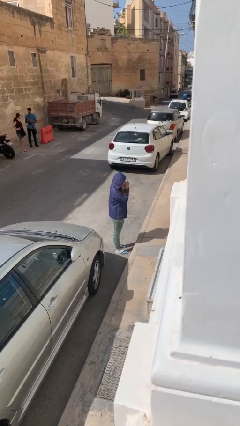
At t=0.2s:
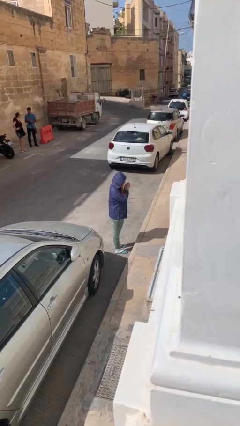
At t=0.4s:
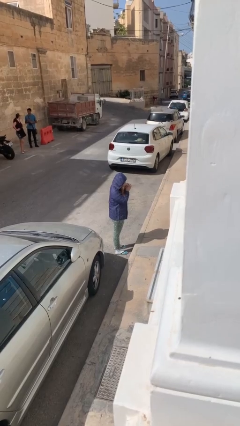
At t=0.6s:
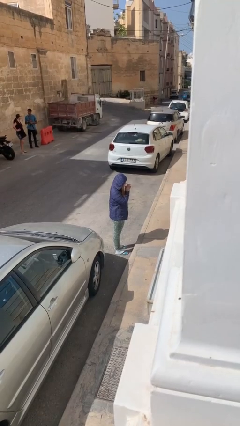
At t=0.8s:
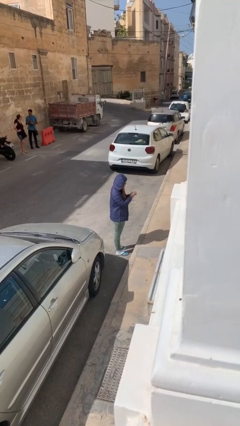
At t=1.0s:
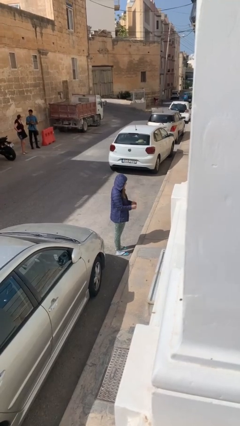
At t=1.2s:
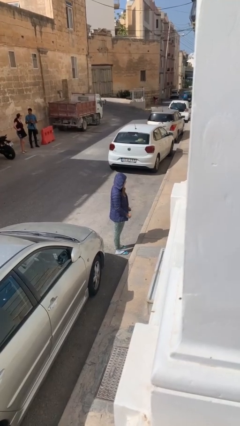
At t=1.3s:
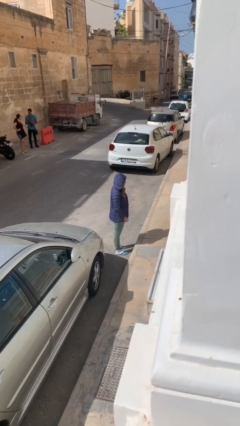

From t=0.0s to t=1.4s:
person blows into hands

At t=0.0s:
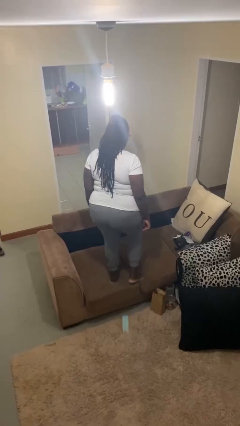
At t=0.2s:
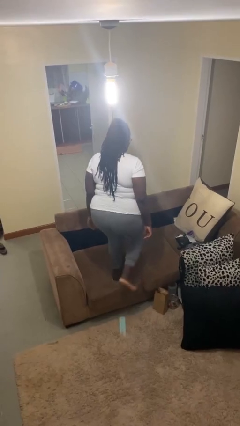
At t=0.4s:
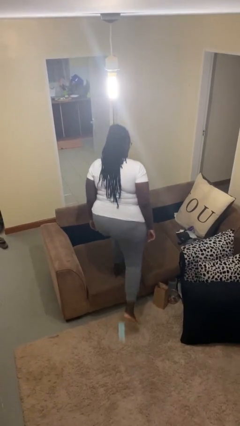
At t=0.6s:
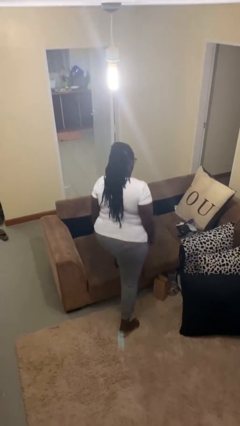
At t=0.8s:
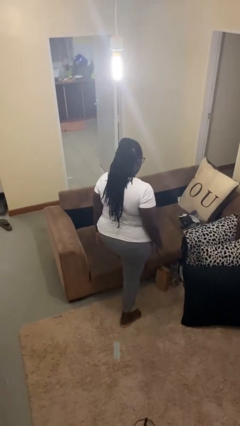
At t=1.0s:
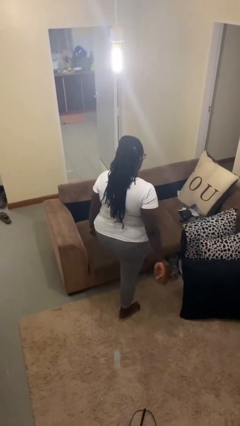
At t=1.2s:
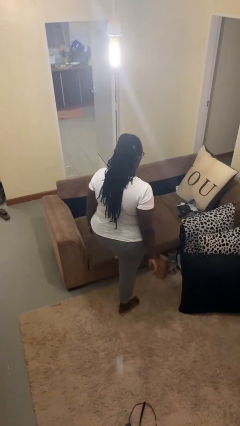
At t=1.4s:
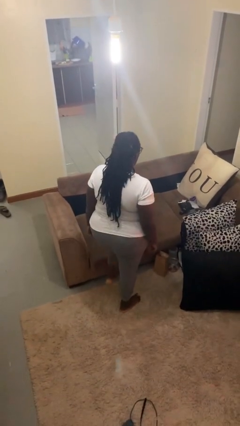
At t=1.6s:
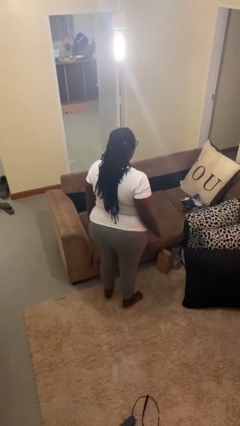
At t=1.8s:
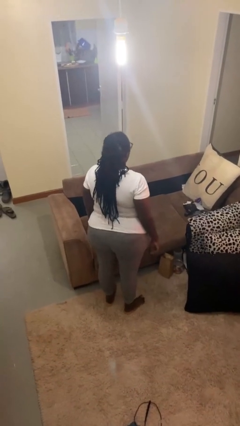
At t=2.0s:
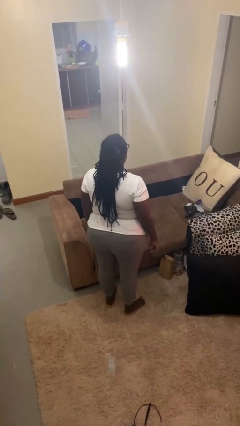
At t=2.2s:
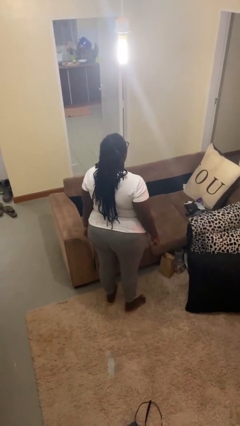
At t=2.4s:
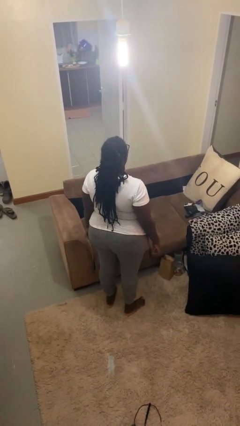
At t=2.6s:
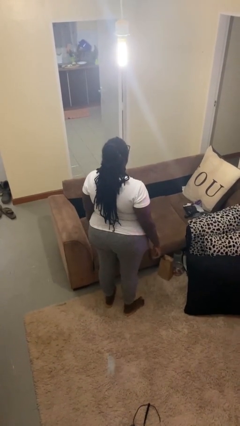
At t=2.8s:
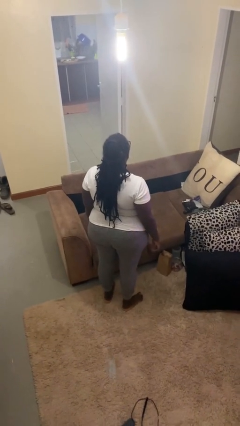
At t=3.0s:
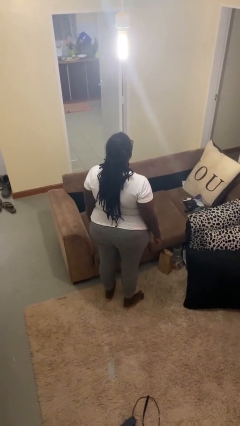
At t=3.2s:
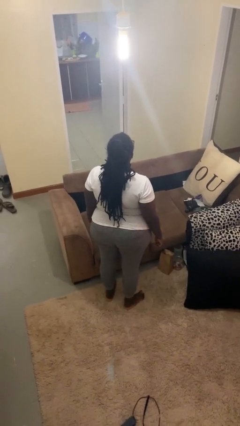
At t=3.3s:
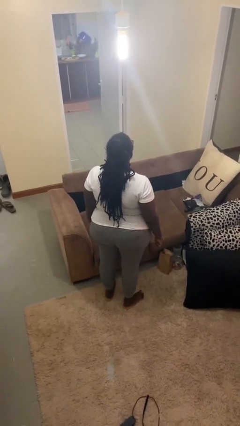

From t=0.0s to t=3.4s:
person climbs off couch

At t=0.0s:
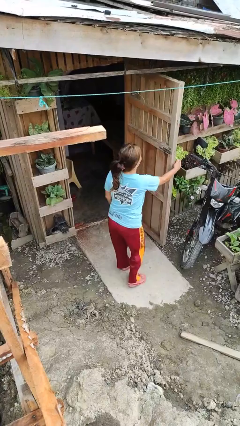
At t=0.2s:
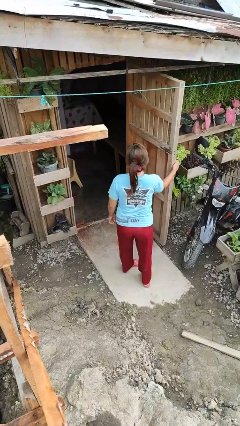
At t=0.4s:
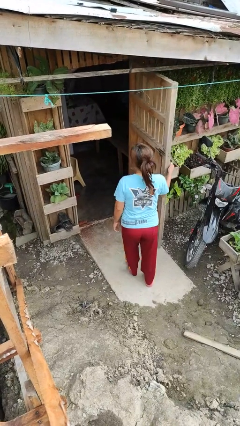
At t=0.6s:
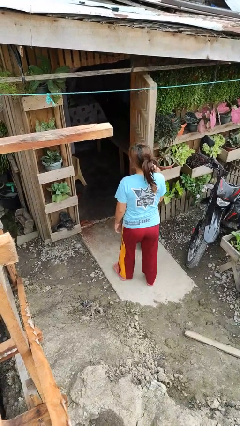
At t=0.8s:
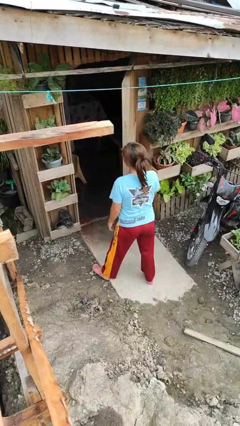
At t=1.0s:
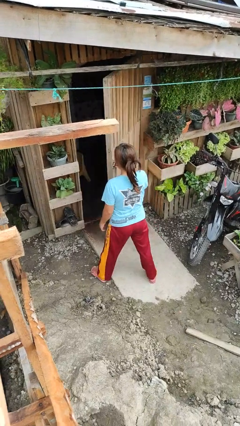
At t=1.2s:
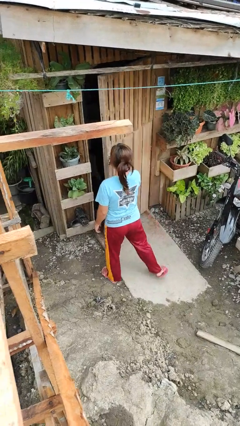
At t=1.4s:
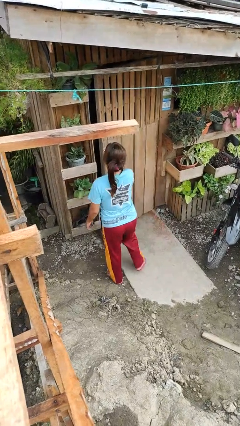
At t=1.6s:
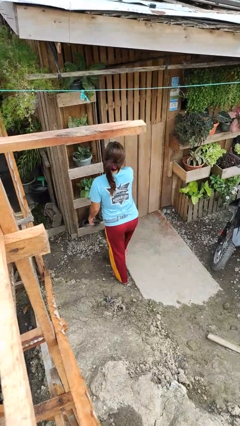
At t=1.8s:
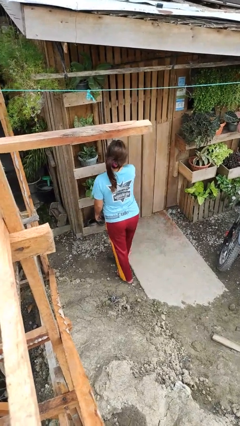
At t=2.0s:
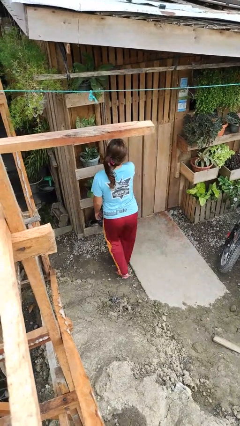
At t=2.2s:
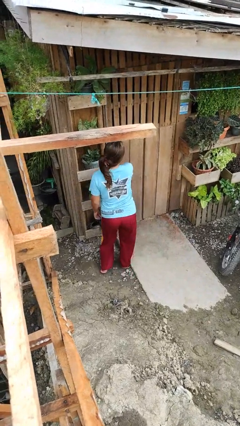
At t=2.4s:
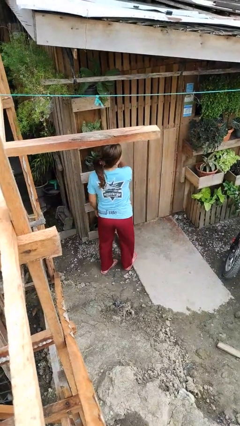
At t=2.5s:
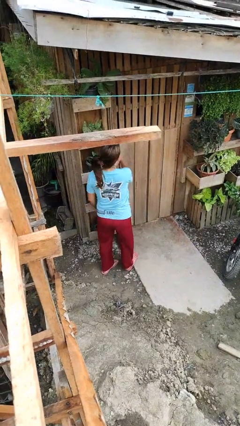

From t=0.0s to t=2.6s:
person closes facility door

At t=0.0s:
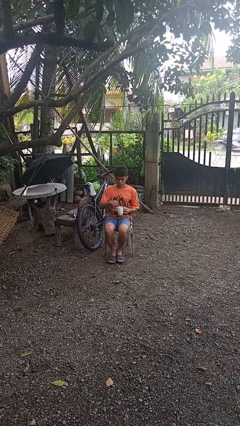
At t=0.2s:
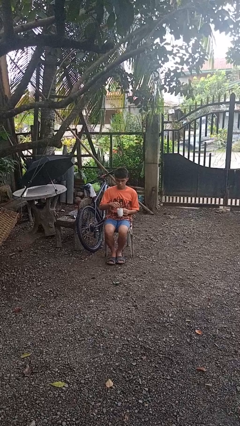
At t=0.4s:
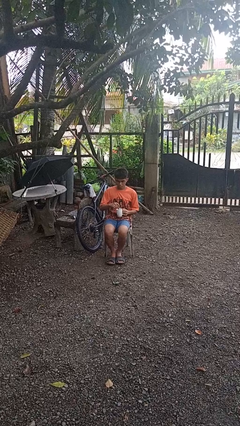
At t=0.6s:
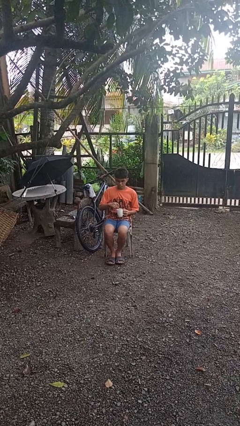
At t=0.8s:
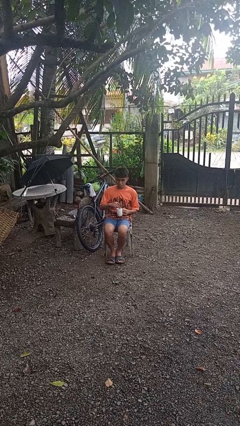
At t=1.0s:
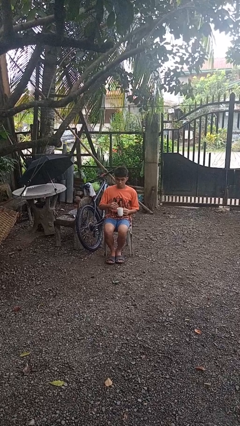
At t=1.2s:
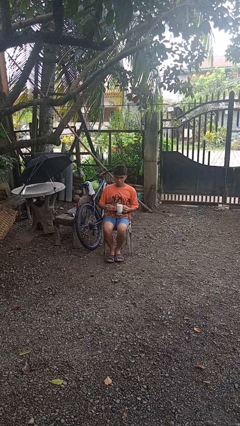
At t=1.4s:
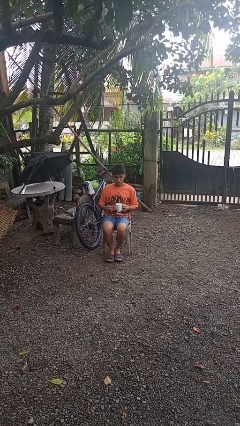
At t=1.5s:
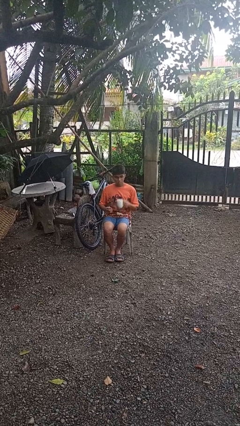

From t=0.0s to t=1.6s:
person stirs mug

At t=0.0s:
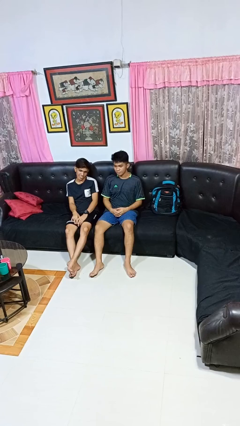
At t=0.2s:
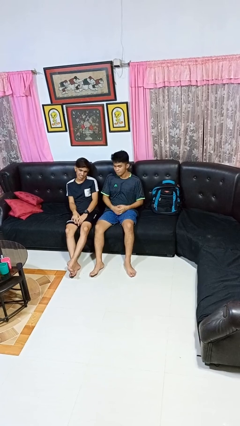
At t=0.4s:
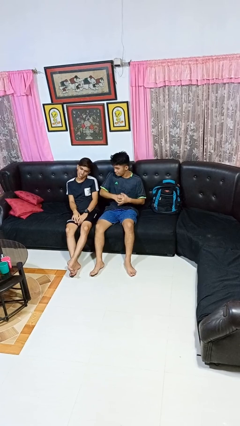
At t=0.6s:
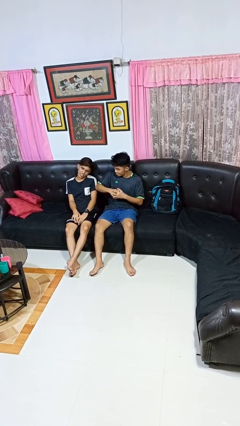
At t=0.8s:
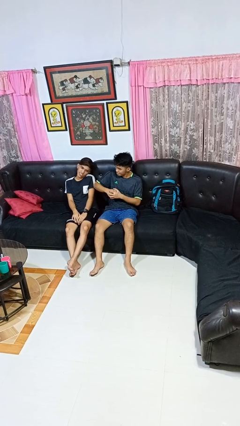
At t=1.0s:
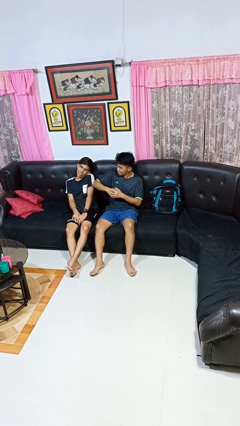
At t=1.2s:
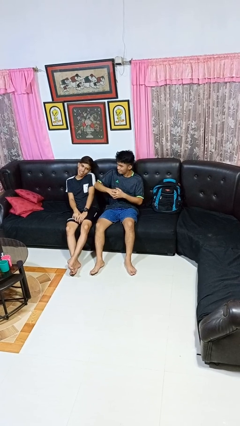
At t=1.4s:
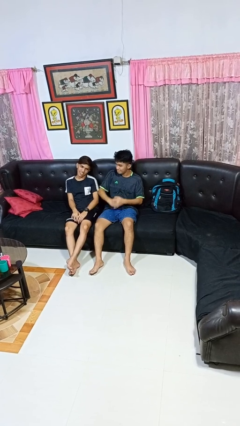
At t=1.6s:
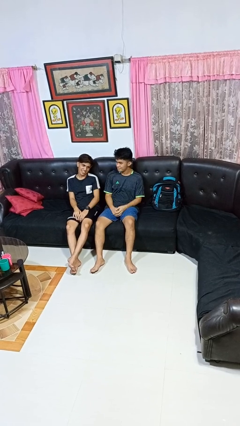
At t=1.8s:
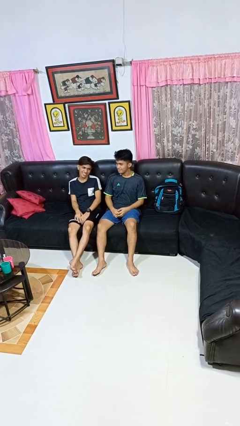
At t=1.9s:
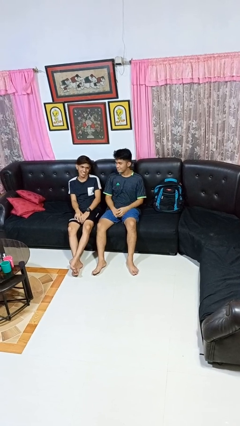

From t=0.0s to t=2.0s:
person nudges person with elbow

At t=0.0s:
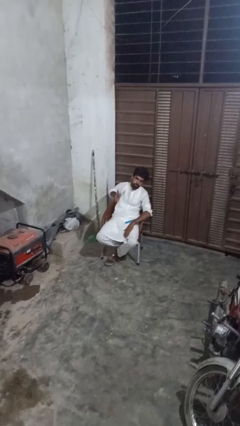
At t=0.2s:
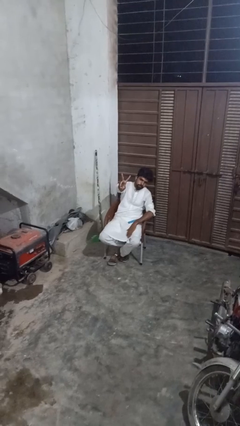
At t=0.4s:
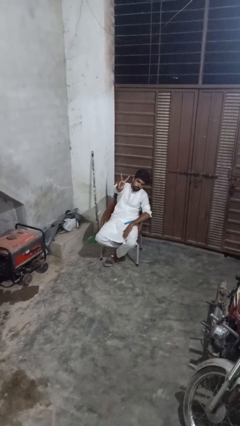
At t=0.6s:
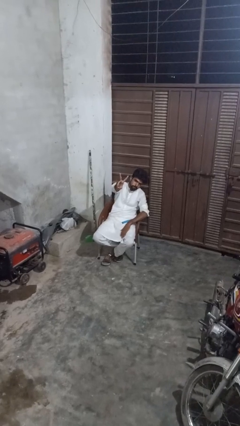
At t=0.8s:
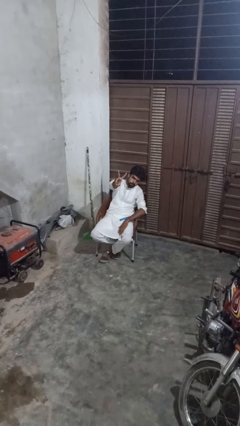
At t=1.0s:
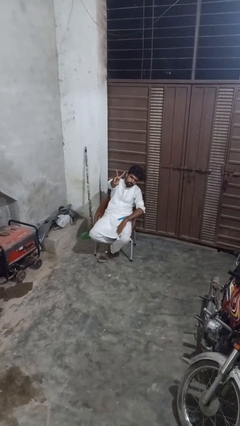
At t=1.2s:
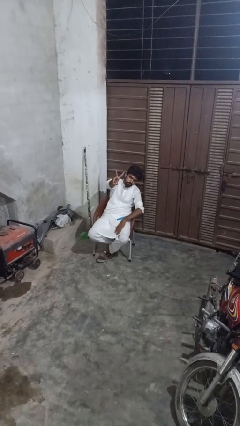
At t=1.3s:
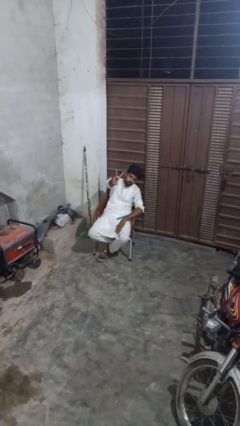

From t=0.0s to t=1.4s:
person gestures peace

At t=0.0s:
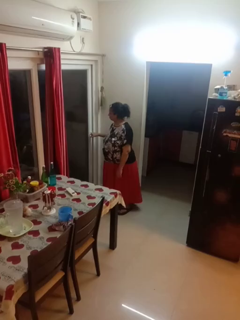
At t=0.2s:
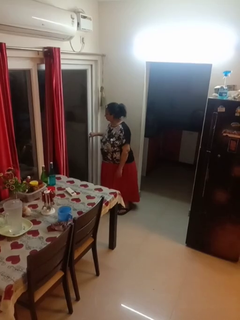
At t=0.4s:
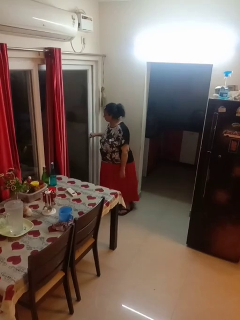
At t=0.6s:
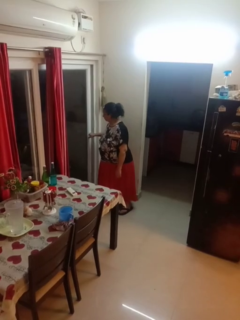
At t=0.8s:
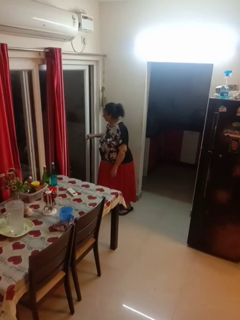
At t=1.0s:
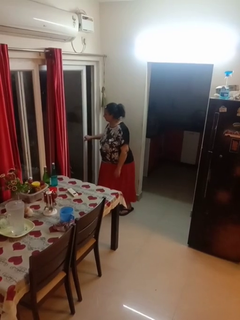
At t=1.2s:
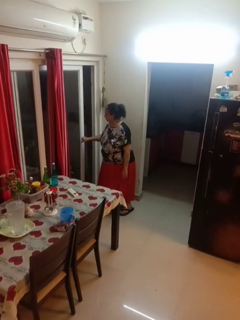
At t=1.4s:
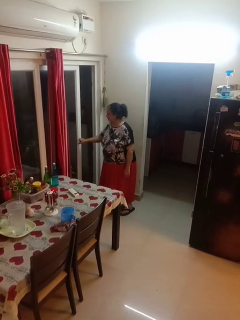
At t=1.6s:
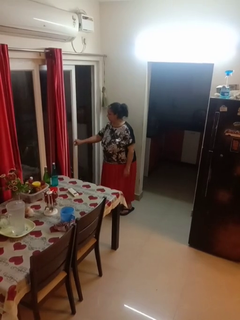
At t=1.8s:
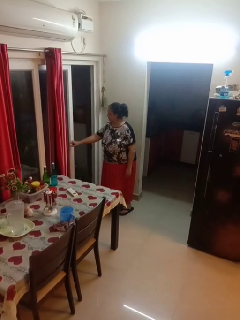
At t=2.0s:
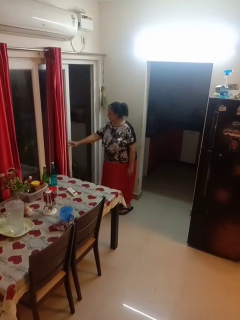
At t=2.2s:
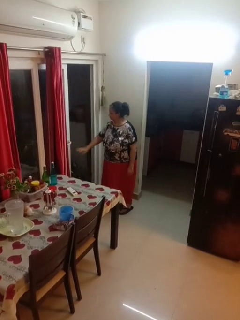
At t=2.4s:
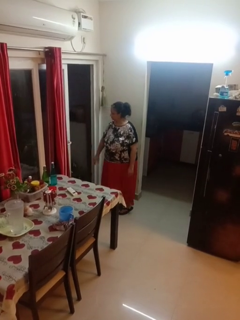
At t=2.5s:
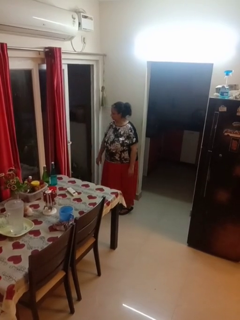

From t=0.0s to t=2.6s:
person opens sliding door

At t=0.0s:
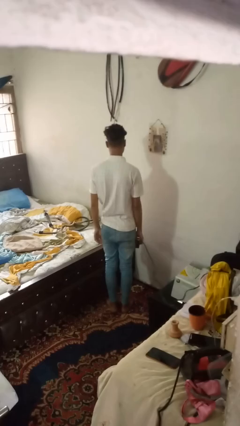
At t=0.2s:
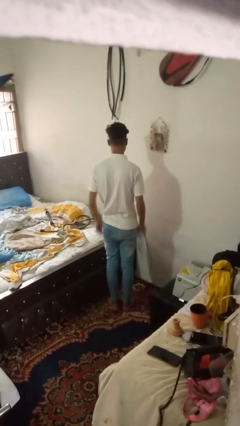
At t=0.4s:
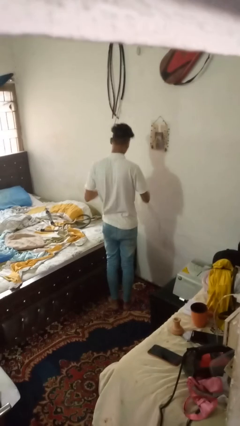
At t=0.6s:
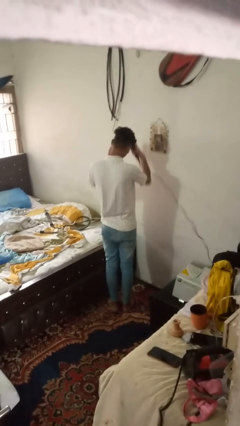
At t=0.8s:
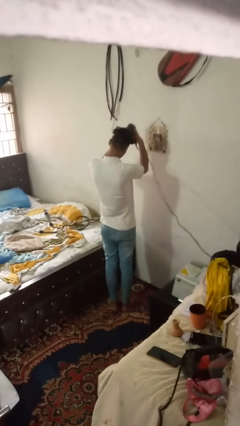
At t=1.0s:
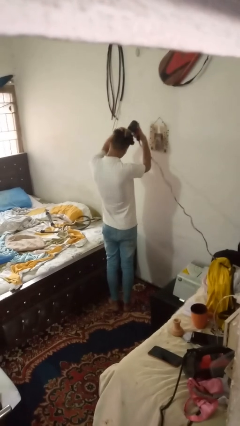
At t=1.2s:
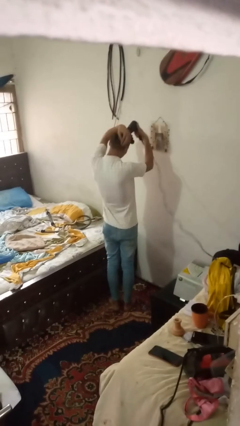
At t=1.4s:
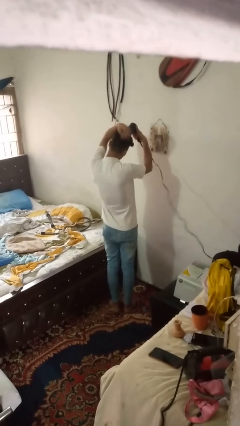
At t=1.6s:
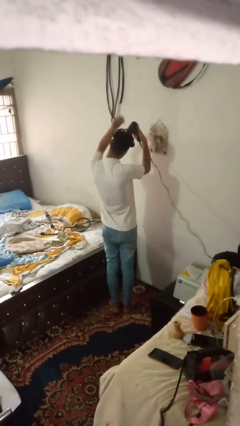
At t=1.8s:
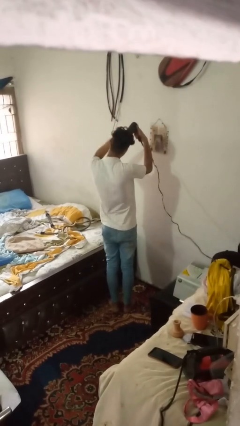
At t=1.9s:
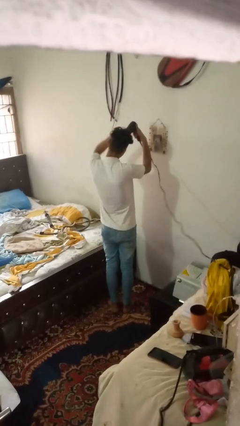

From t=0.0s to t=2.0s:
person dries hair with hairdryer

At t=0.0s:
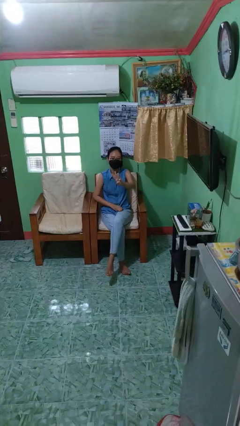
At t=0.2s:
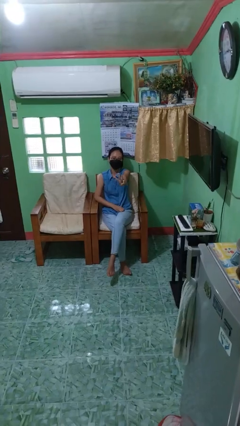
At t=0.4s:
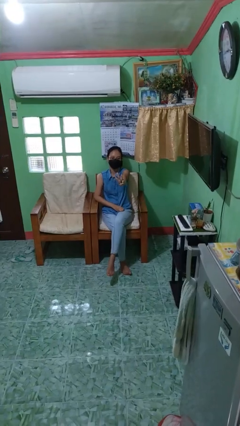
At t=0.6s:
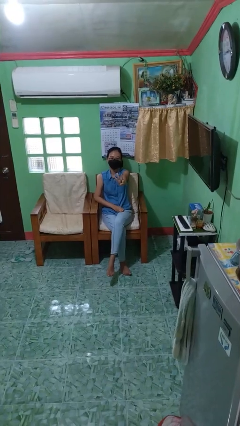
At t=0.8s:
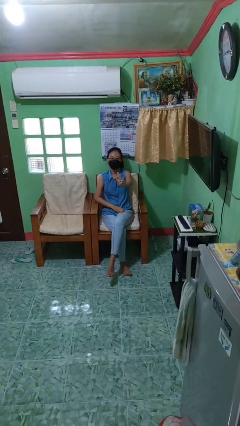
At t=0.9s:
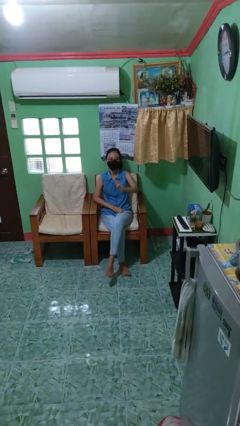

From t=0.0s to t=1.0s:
person gestures number three
